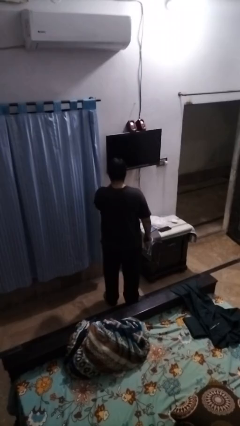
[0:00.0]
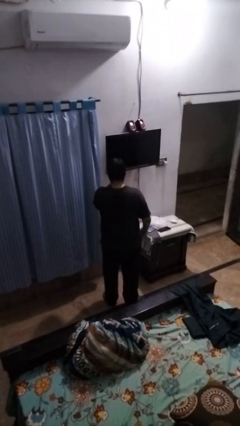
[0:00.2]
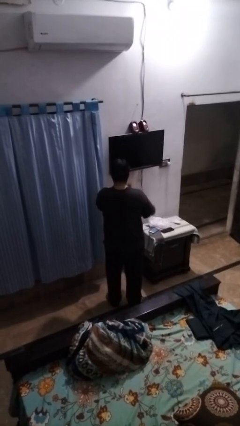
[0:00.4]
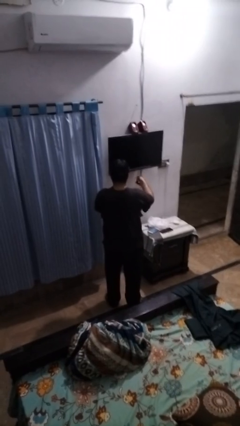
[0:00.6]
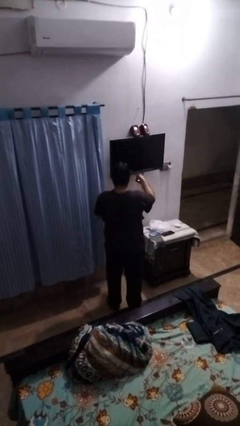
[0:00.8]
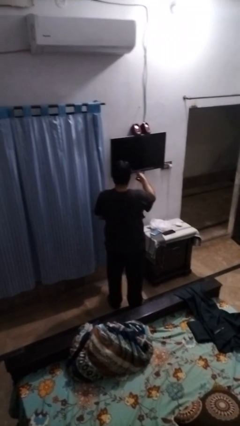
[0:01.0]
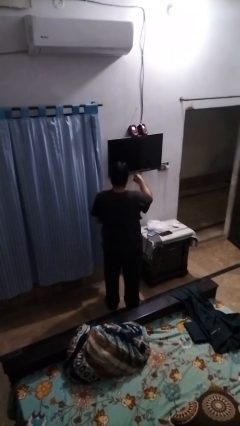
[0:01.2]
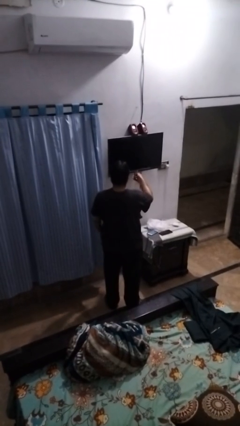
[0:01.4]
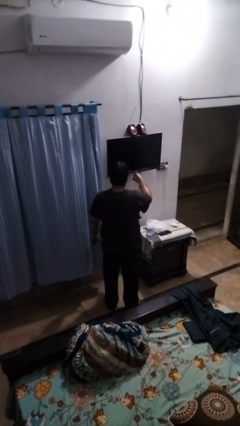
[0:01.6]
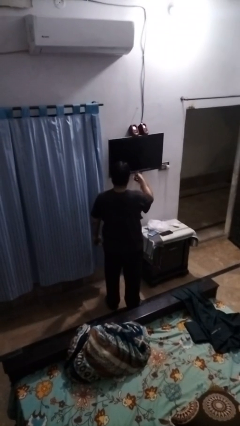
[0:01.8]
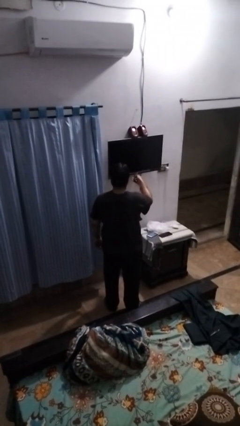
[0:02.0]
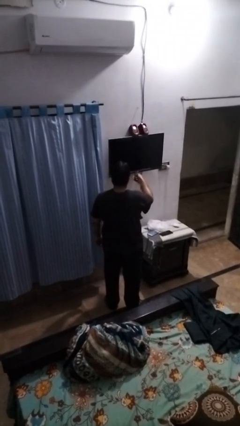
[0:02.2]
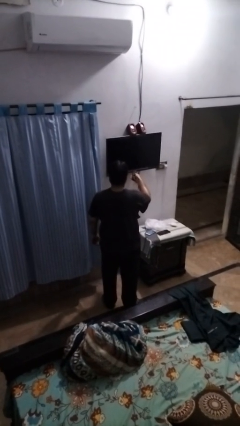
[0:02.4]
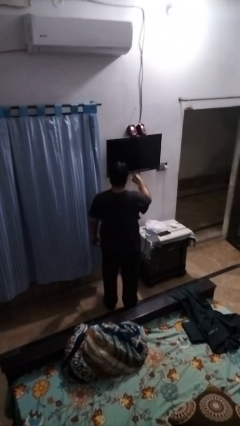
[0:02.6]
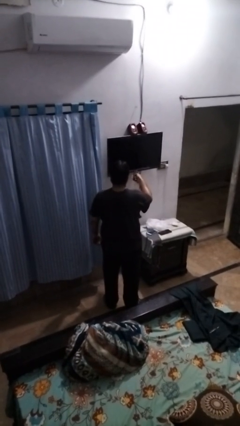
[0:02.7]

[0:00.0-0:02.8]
person uses television remote

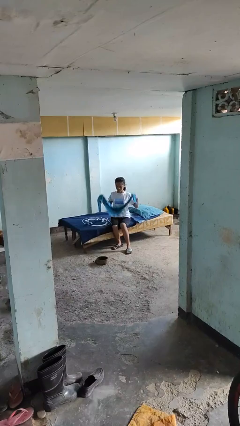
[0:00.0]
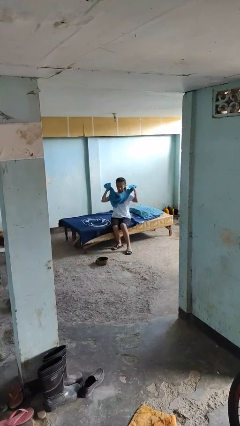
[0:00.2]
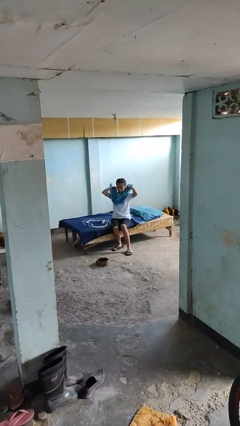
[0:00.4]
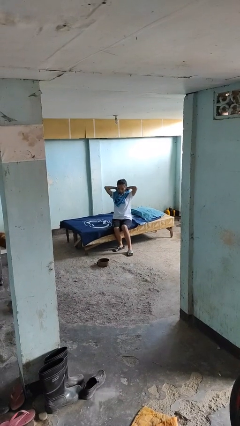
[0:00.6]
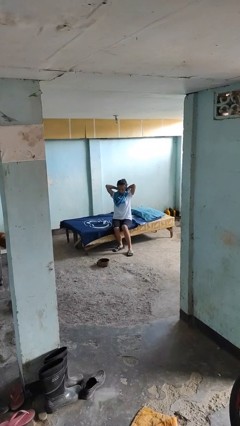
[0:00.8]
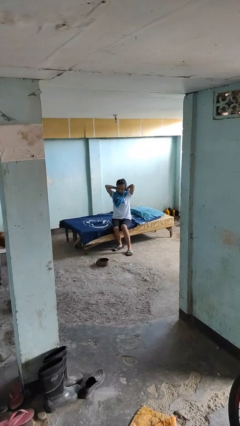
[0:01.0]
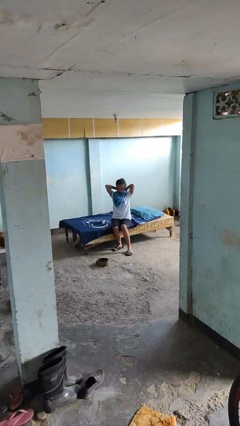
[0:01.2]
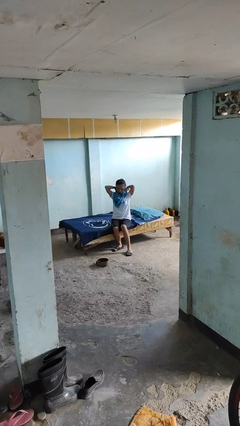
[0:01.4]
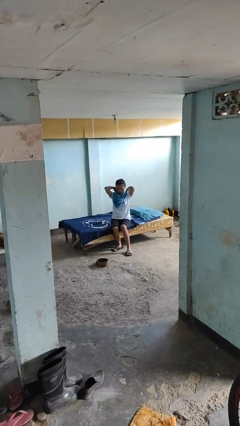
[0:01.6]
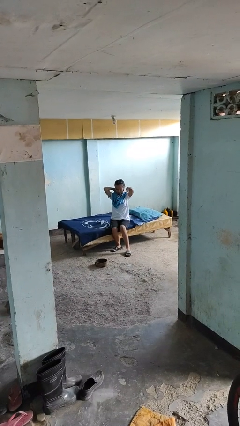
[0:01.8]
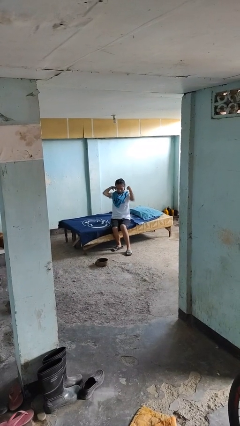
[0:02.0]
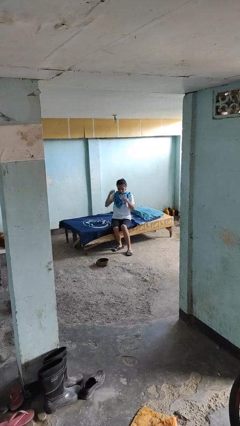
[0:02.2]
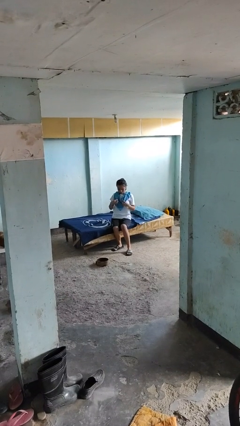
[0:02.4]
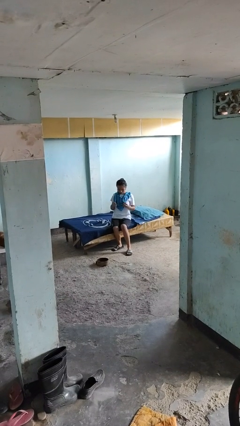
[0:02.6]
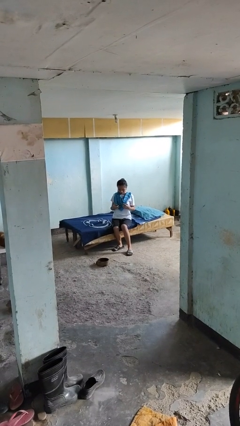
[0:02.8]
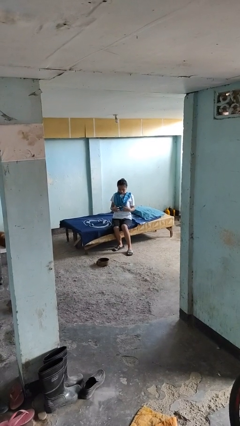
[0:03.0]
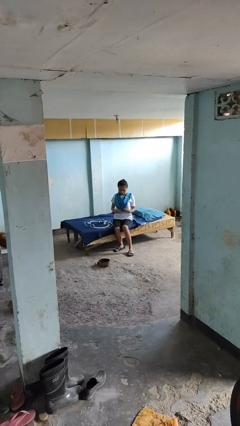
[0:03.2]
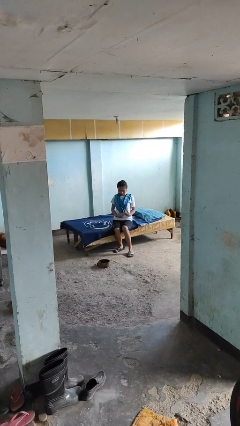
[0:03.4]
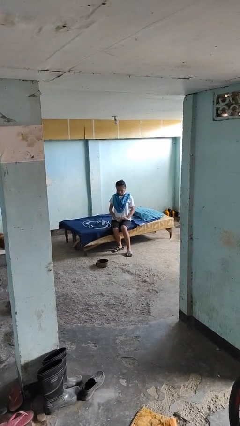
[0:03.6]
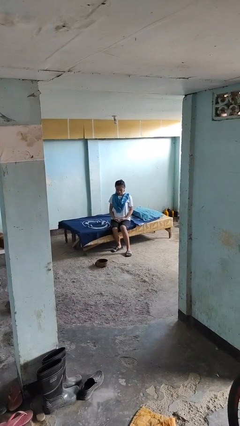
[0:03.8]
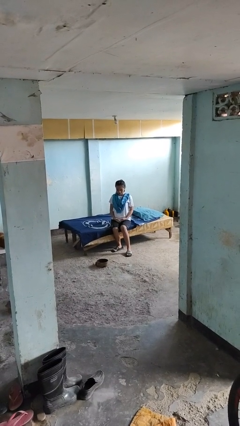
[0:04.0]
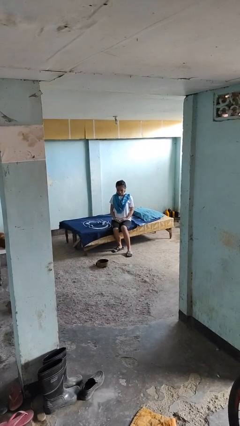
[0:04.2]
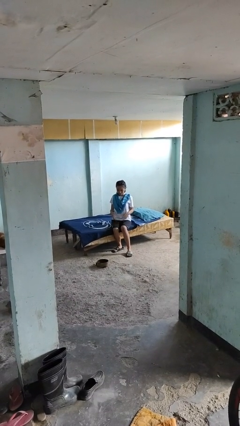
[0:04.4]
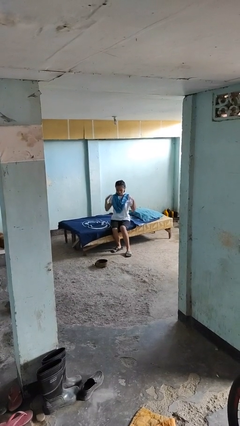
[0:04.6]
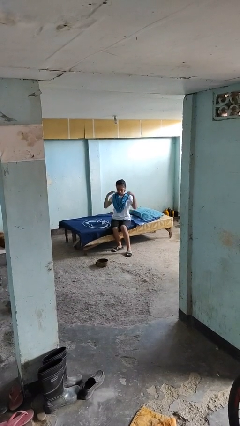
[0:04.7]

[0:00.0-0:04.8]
person puts on scarf

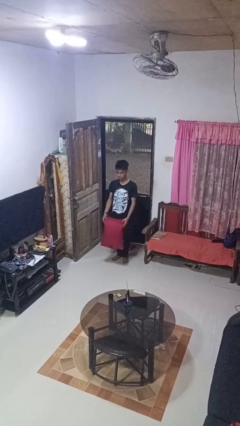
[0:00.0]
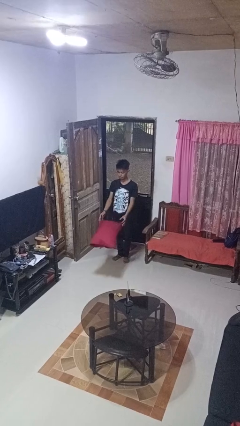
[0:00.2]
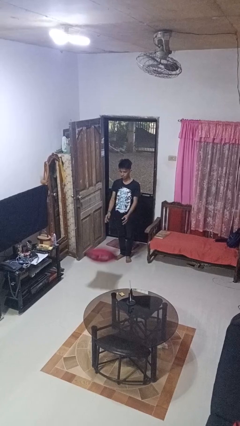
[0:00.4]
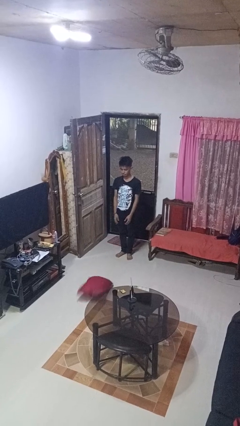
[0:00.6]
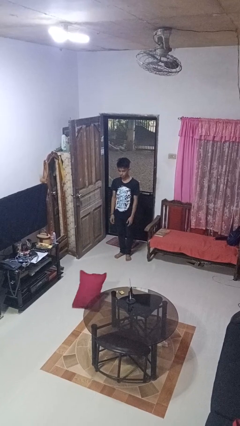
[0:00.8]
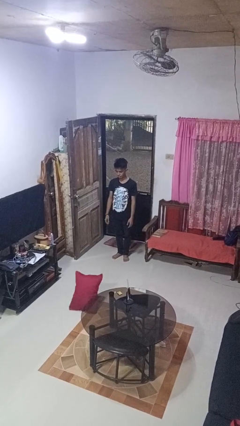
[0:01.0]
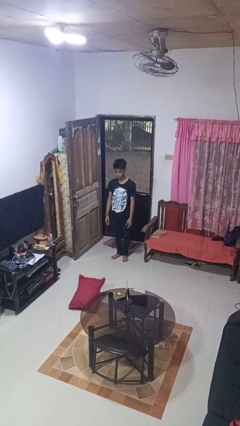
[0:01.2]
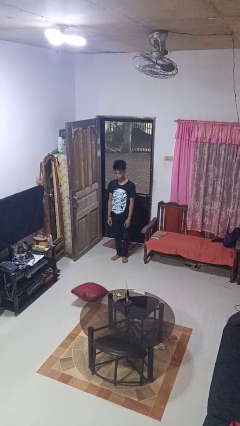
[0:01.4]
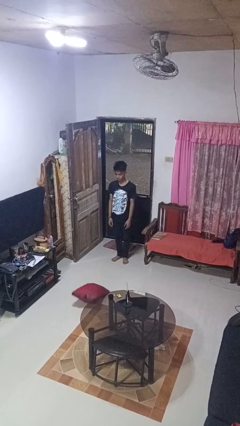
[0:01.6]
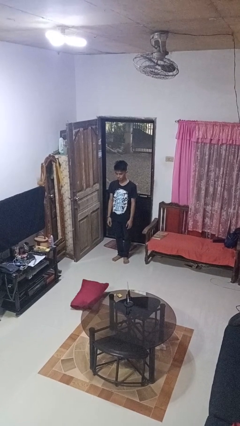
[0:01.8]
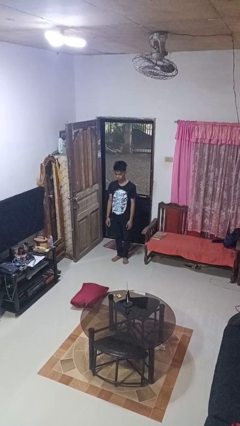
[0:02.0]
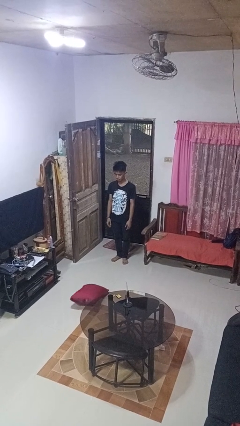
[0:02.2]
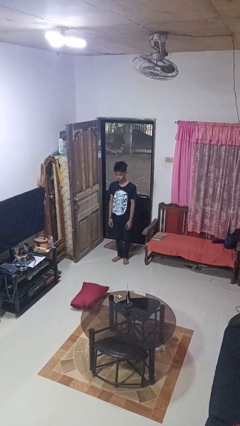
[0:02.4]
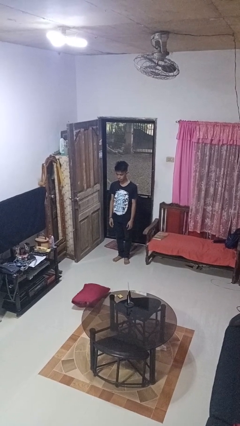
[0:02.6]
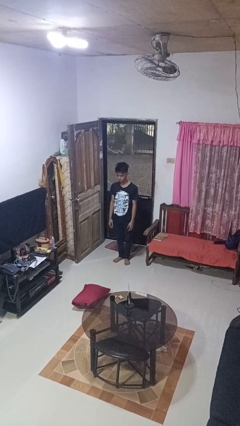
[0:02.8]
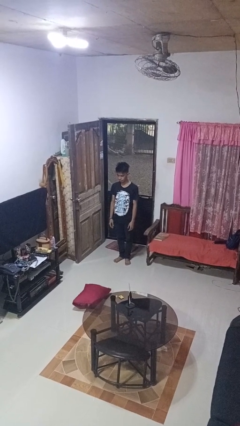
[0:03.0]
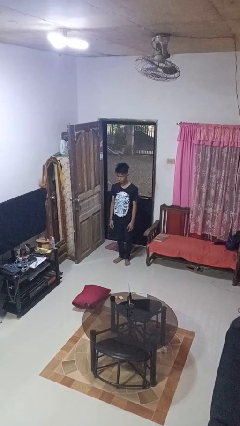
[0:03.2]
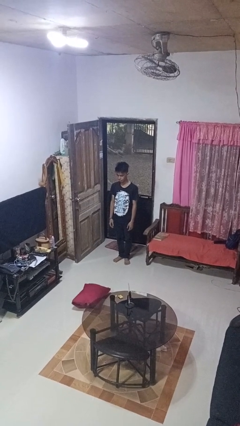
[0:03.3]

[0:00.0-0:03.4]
person throws object to ground

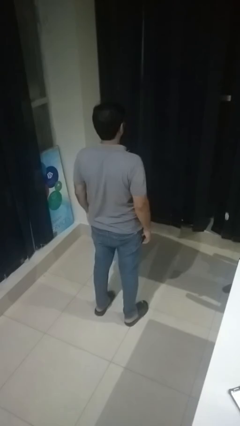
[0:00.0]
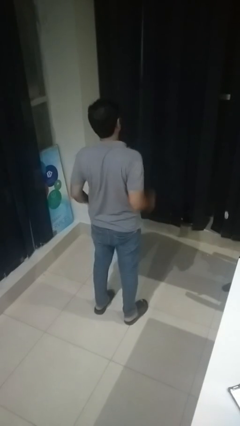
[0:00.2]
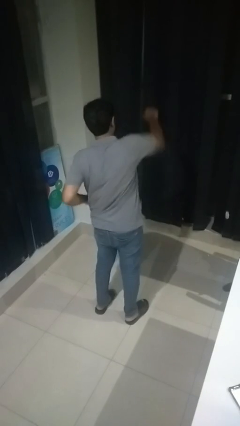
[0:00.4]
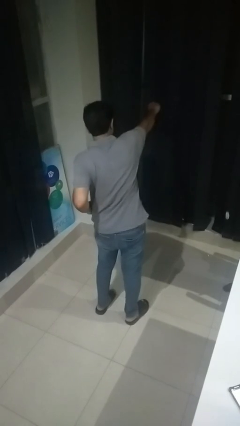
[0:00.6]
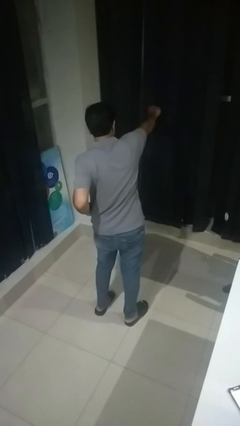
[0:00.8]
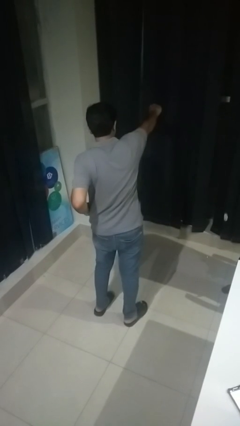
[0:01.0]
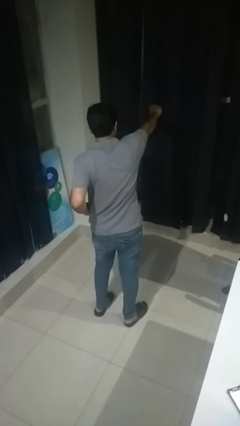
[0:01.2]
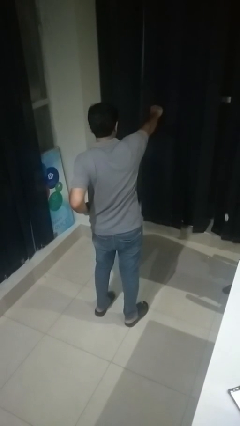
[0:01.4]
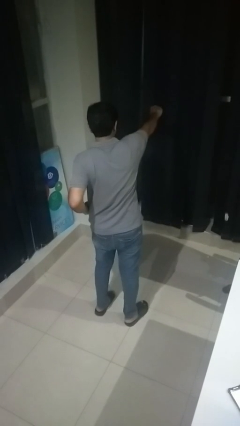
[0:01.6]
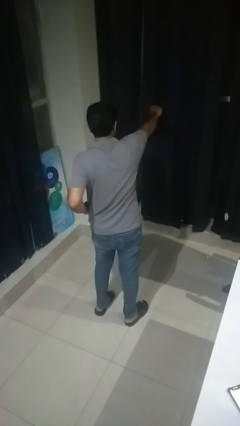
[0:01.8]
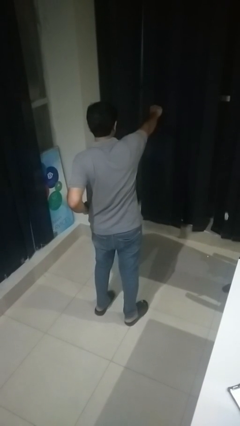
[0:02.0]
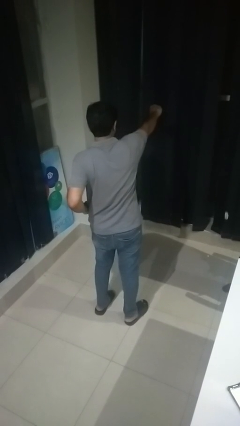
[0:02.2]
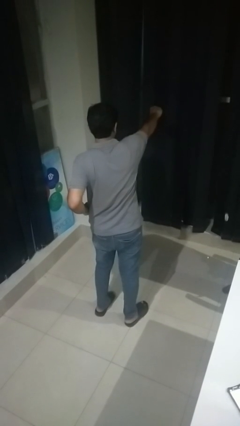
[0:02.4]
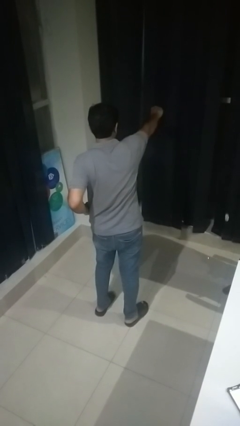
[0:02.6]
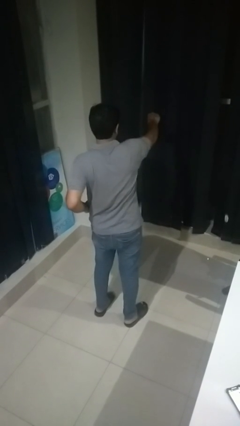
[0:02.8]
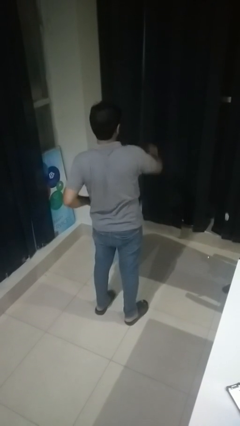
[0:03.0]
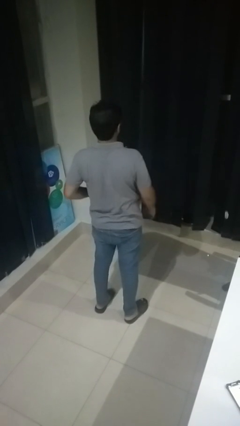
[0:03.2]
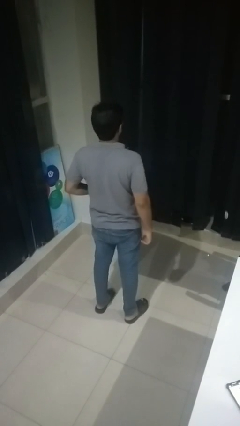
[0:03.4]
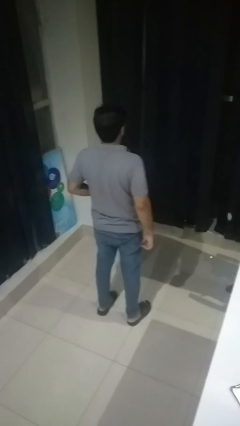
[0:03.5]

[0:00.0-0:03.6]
person punches

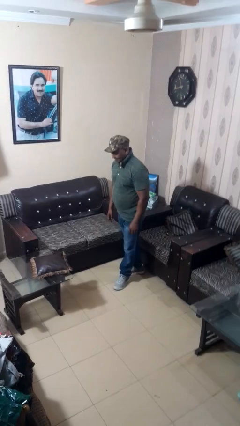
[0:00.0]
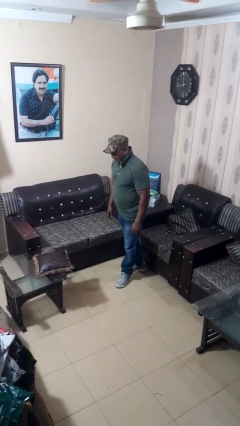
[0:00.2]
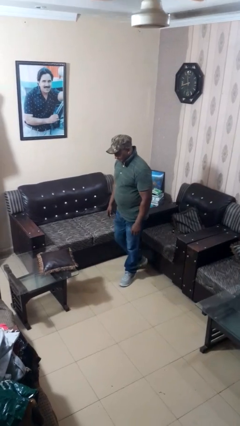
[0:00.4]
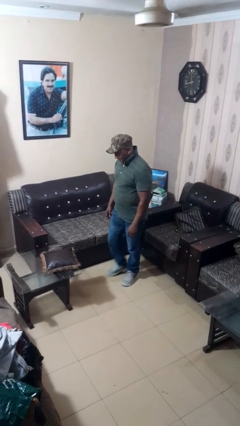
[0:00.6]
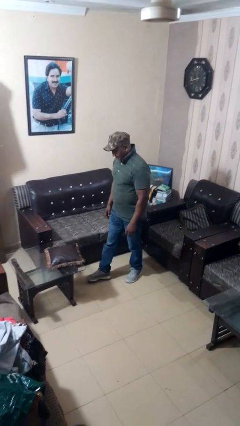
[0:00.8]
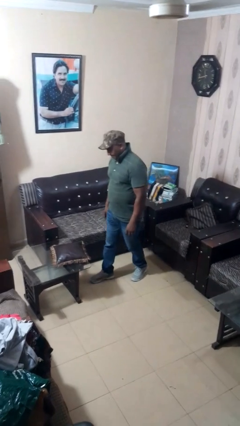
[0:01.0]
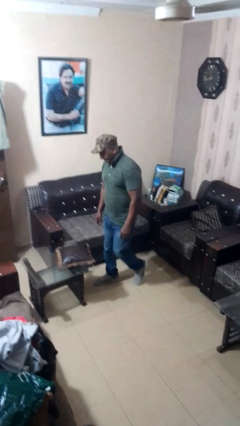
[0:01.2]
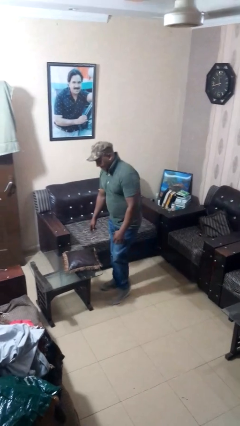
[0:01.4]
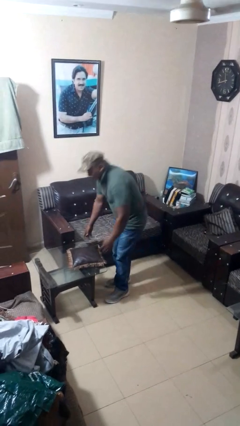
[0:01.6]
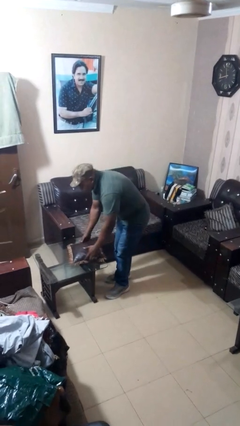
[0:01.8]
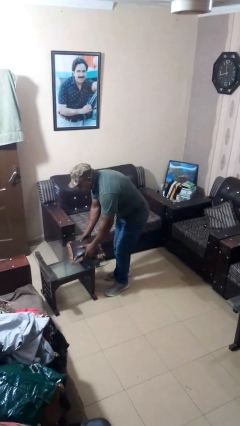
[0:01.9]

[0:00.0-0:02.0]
person picks up object from table

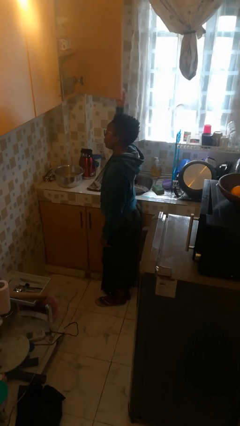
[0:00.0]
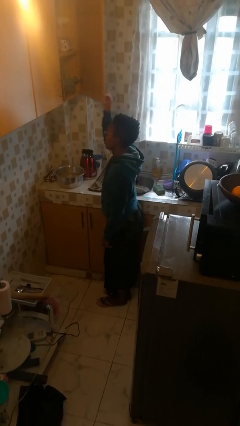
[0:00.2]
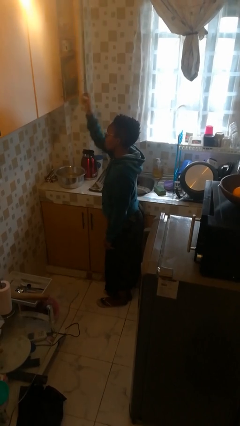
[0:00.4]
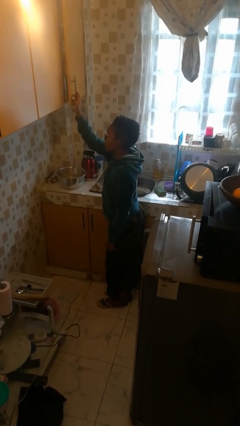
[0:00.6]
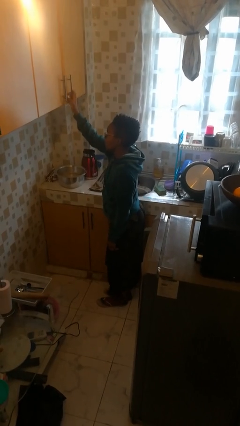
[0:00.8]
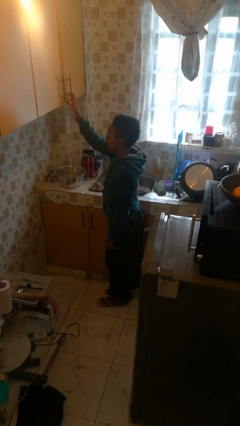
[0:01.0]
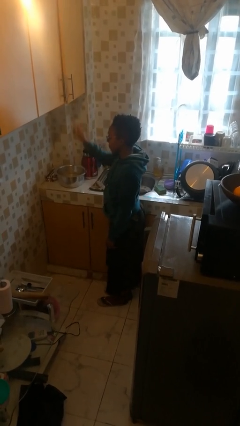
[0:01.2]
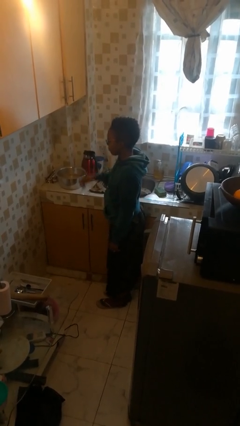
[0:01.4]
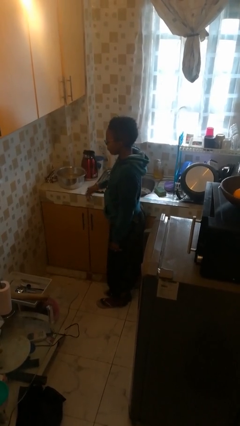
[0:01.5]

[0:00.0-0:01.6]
person closes cabinet
